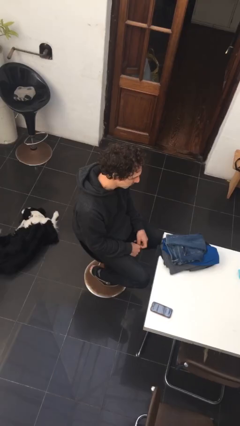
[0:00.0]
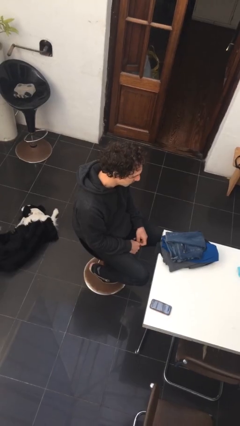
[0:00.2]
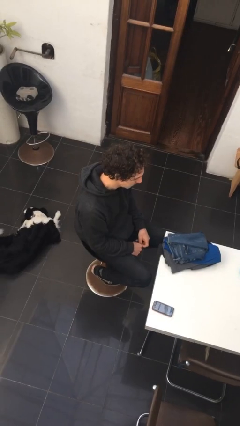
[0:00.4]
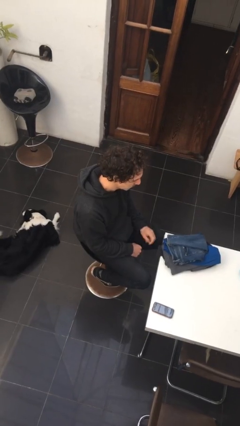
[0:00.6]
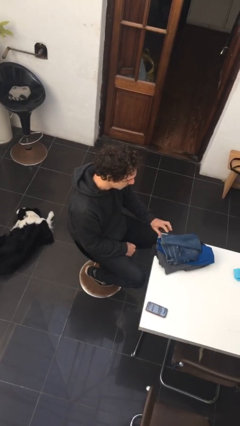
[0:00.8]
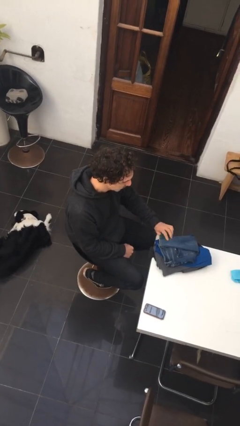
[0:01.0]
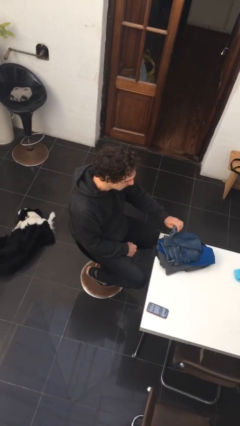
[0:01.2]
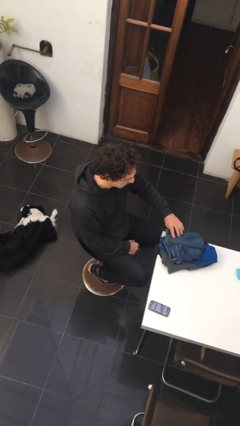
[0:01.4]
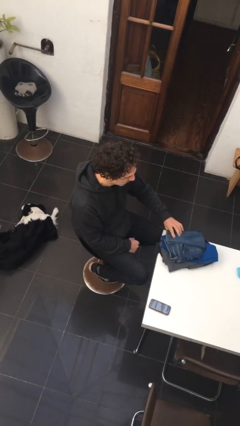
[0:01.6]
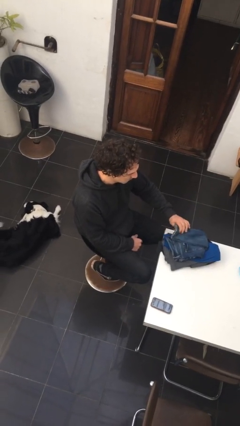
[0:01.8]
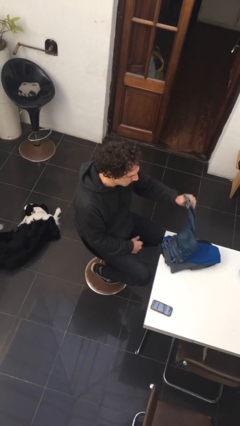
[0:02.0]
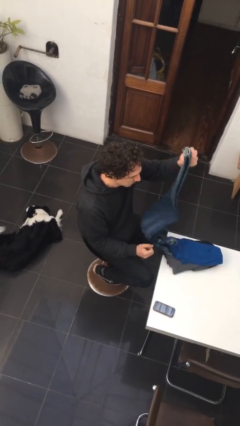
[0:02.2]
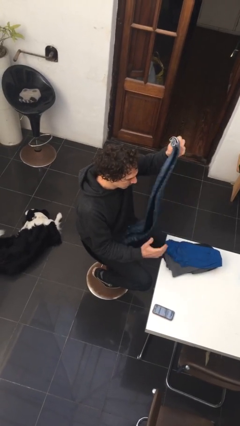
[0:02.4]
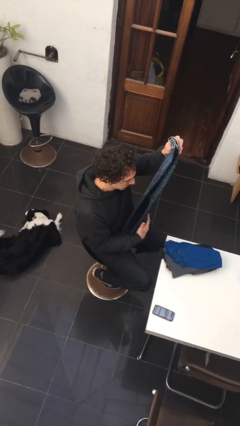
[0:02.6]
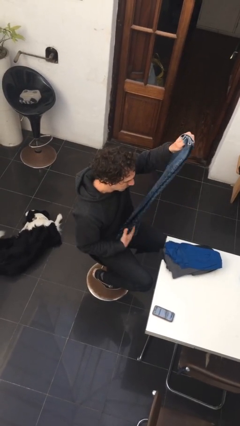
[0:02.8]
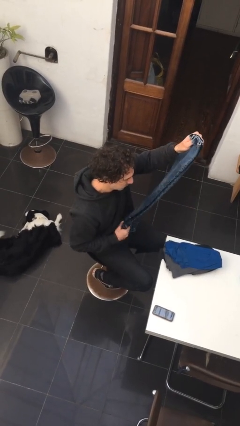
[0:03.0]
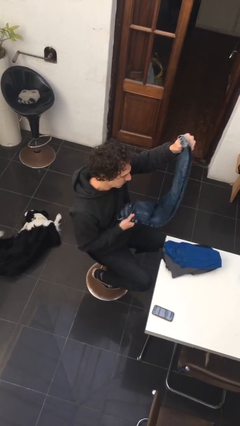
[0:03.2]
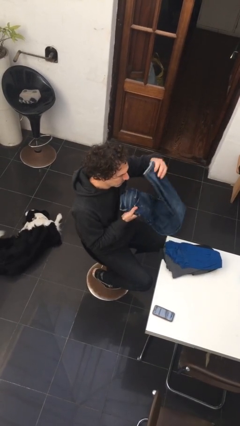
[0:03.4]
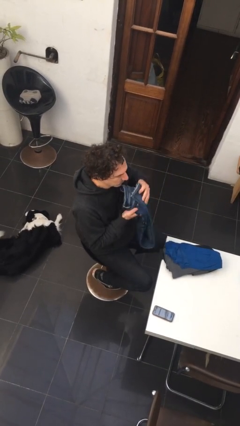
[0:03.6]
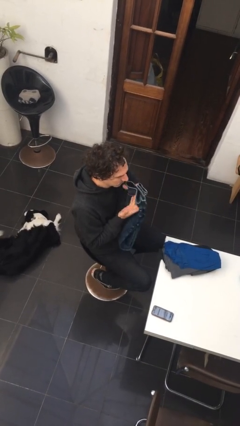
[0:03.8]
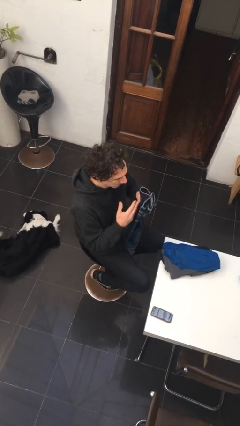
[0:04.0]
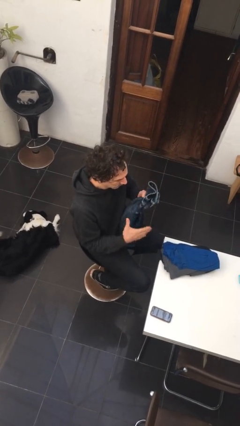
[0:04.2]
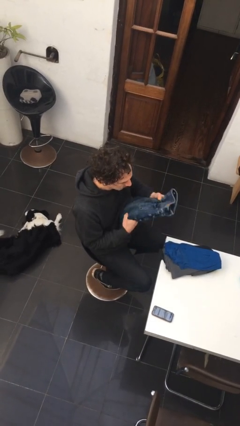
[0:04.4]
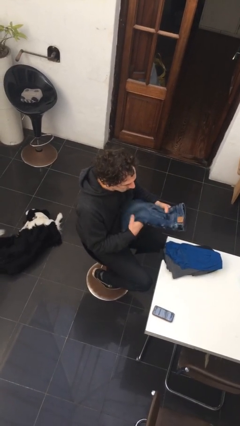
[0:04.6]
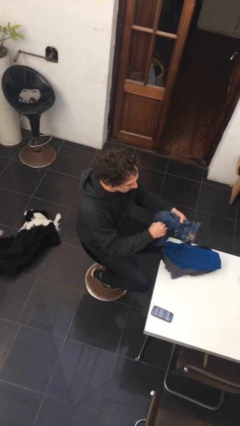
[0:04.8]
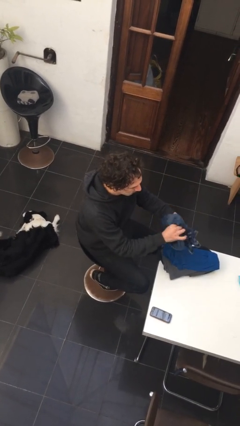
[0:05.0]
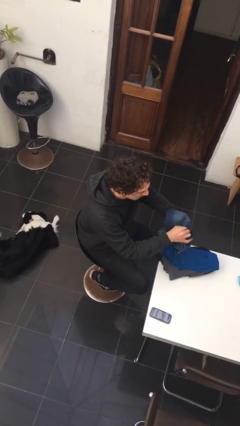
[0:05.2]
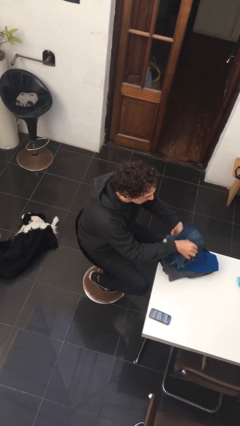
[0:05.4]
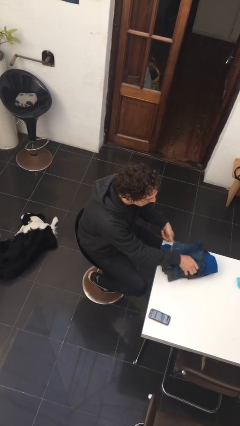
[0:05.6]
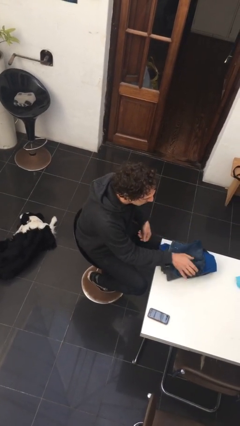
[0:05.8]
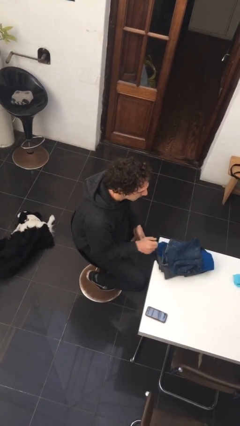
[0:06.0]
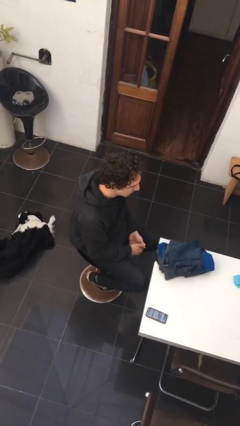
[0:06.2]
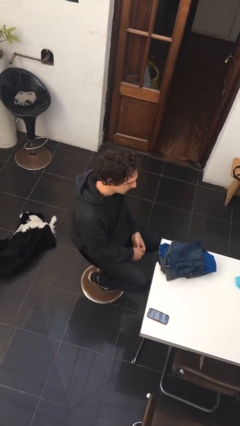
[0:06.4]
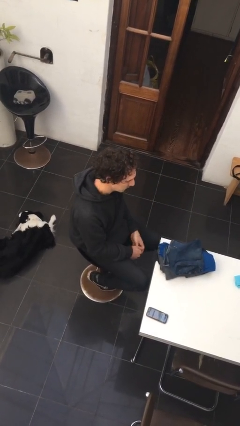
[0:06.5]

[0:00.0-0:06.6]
person folds pants

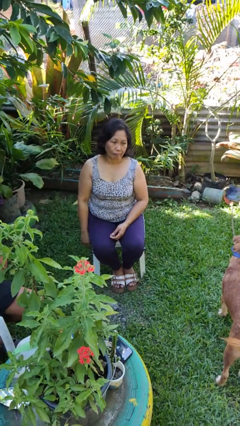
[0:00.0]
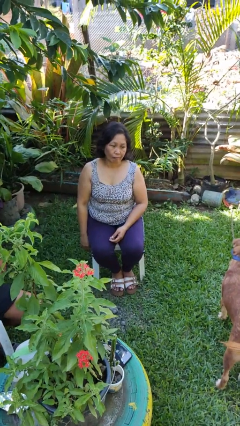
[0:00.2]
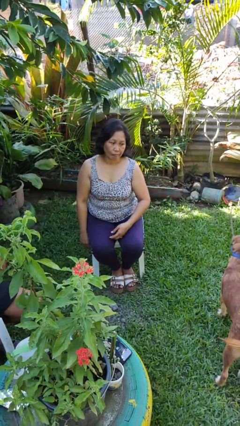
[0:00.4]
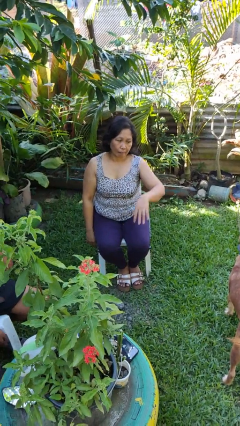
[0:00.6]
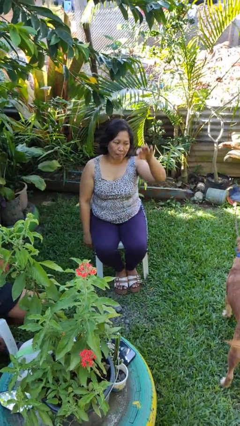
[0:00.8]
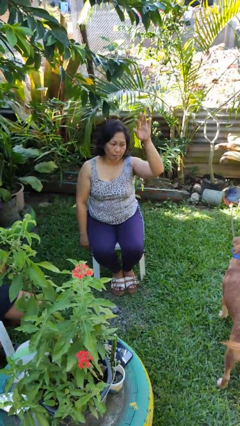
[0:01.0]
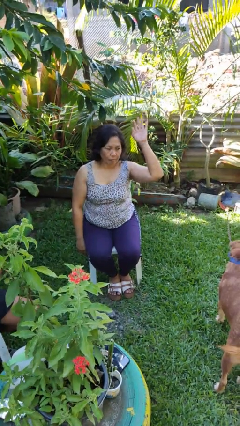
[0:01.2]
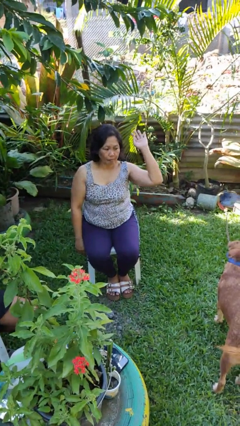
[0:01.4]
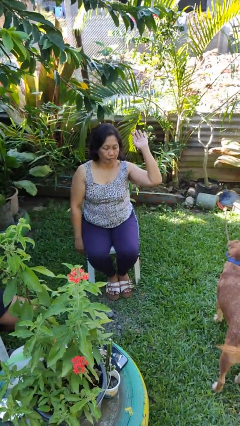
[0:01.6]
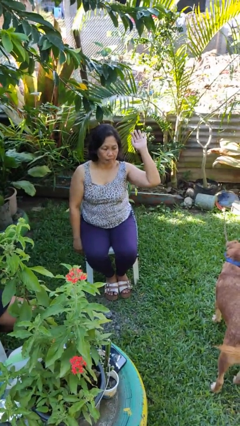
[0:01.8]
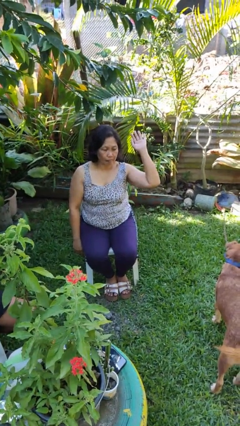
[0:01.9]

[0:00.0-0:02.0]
person gestures raise hand

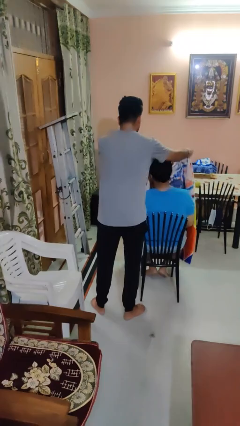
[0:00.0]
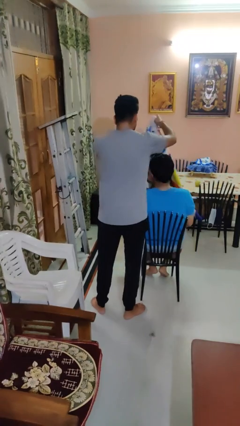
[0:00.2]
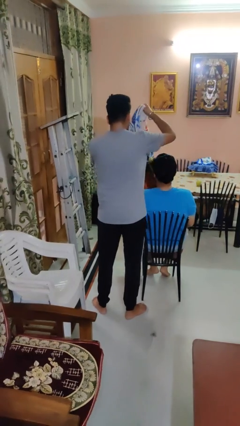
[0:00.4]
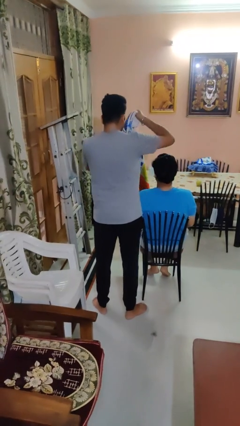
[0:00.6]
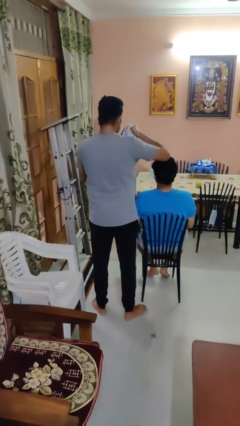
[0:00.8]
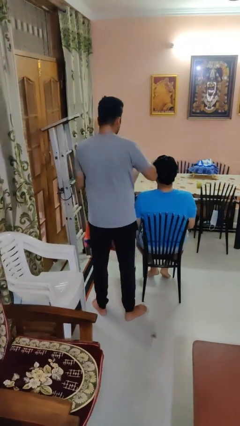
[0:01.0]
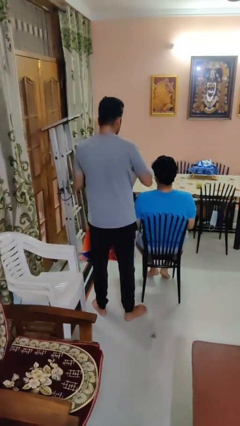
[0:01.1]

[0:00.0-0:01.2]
person uncovers friend with blanket

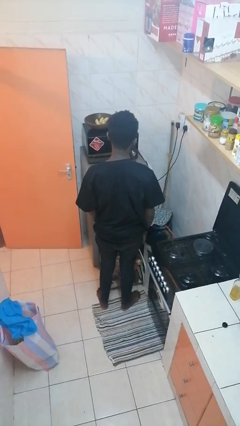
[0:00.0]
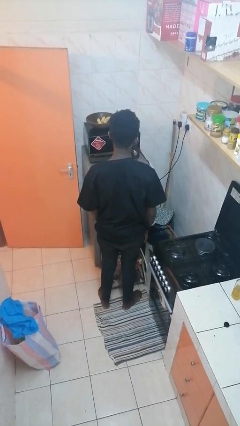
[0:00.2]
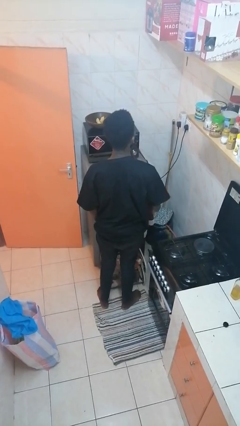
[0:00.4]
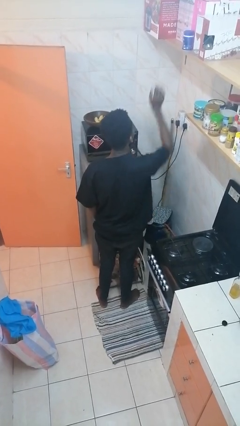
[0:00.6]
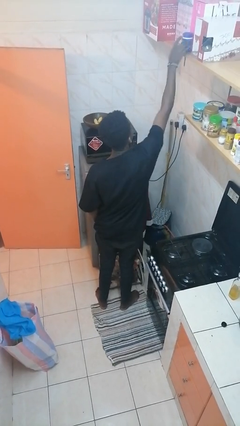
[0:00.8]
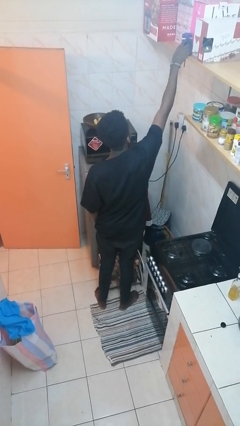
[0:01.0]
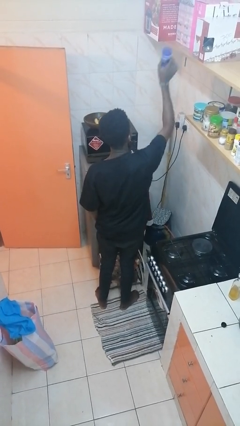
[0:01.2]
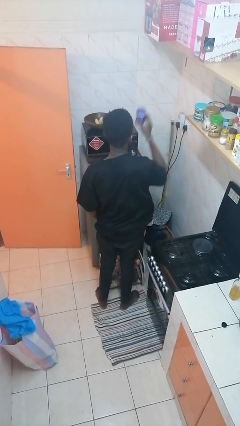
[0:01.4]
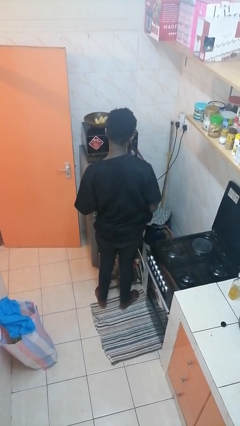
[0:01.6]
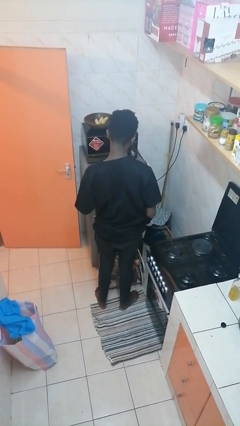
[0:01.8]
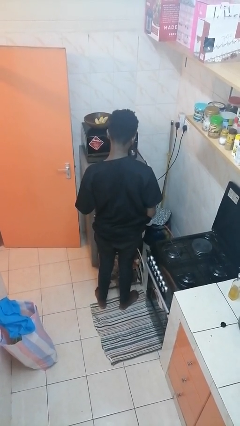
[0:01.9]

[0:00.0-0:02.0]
person picks up object from shelf

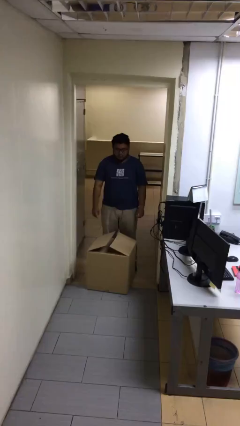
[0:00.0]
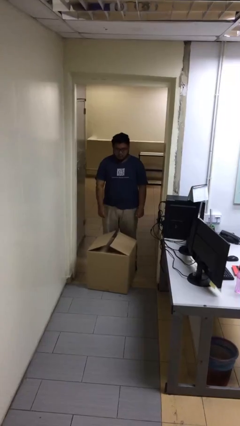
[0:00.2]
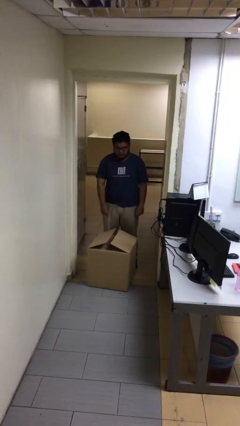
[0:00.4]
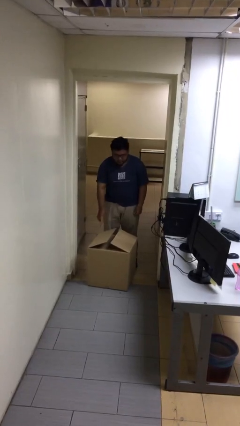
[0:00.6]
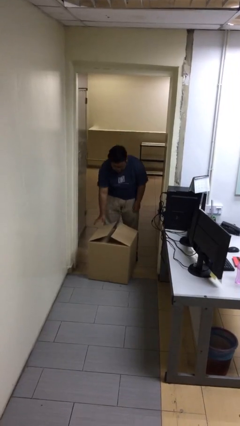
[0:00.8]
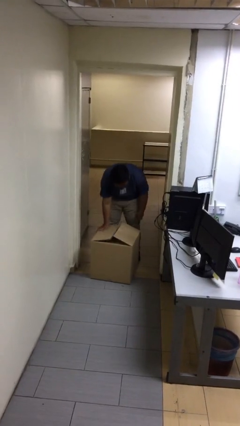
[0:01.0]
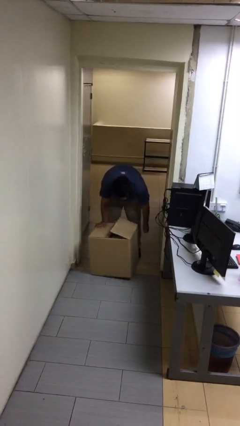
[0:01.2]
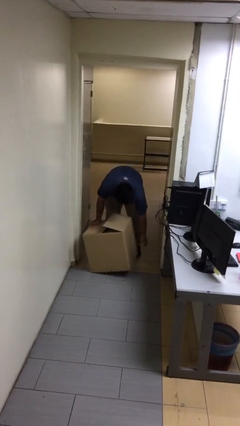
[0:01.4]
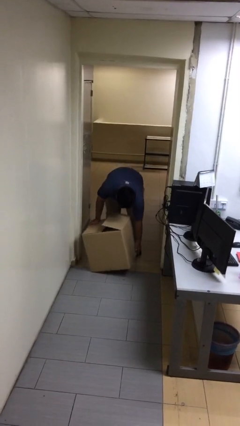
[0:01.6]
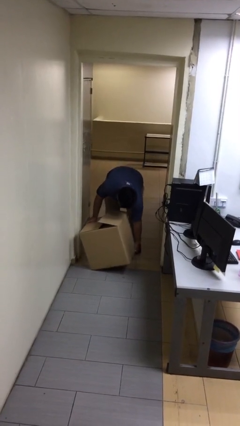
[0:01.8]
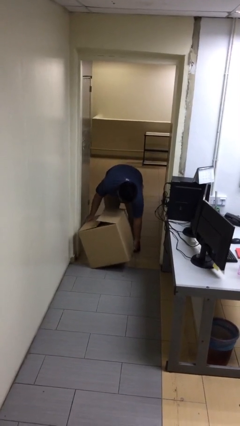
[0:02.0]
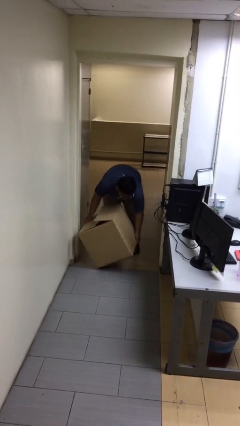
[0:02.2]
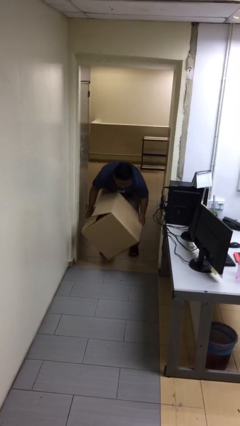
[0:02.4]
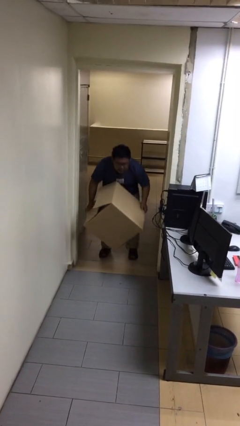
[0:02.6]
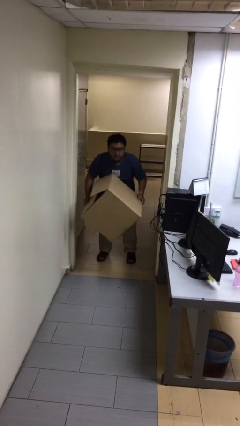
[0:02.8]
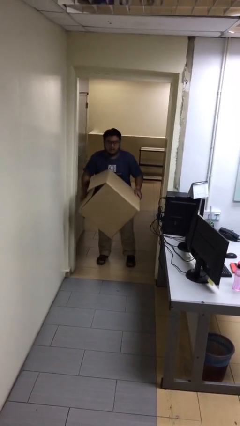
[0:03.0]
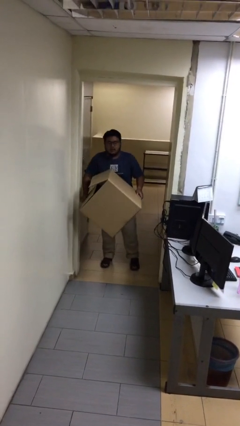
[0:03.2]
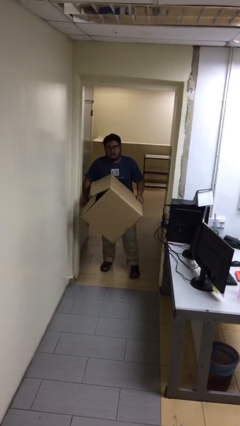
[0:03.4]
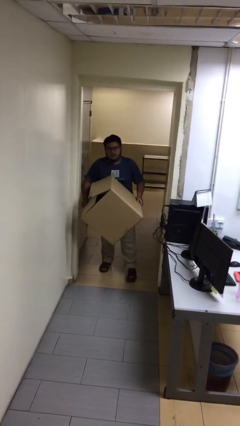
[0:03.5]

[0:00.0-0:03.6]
person picks up object from floor

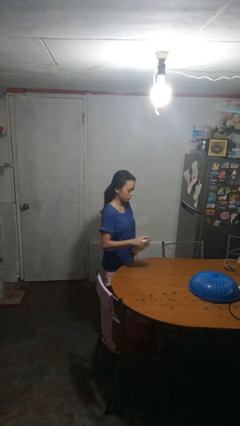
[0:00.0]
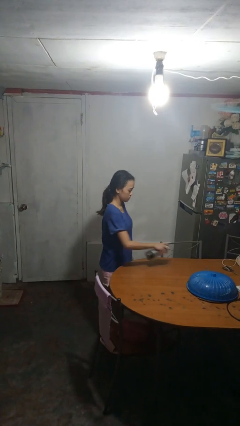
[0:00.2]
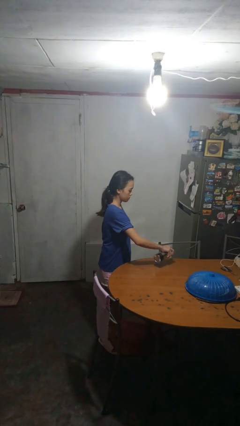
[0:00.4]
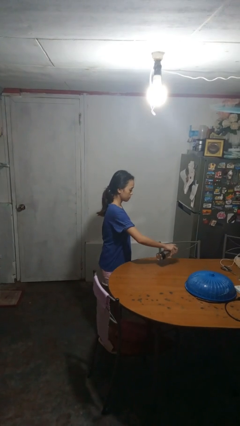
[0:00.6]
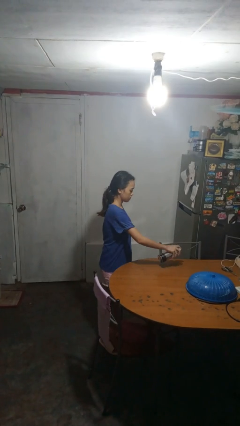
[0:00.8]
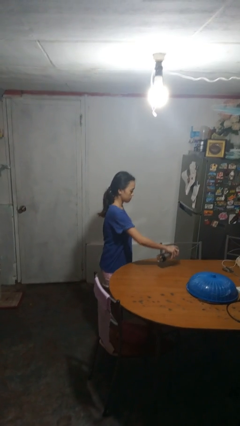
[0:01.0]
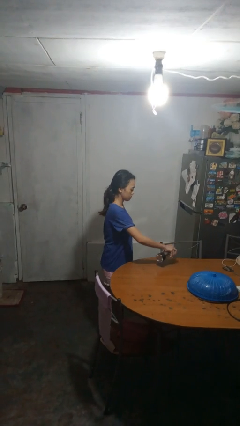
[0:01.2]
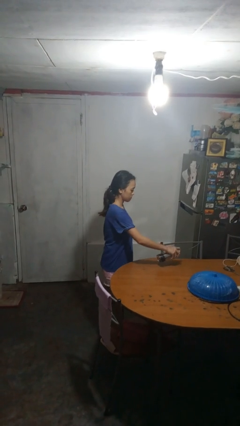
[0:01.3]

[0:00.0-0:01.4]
person sprays from bottle

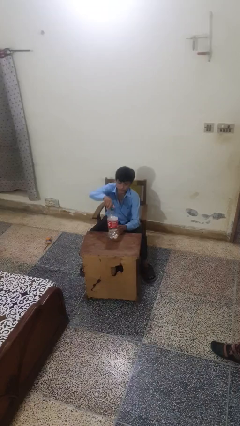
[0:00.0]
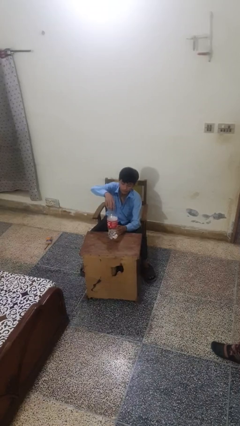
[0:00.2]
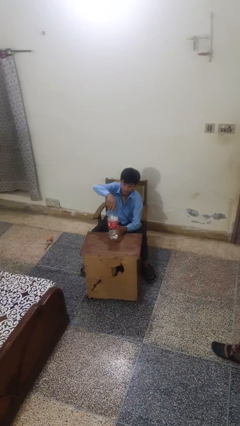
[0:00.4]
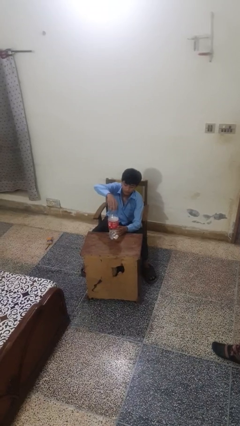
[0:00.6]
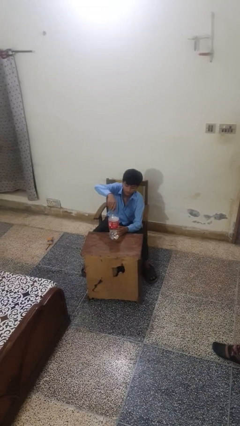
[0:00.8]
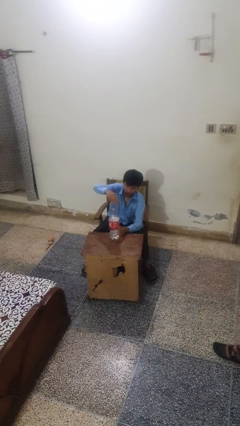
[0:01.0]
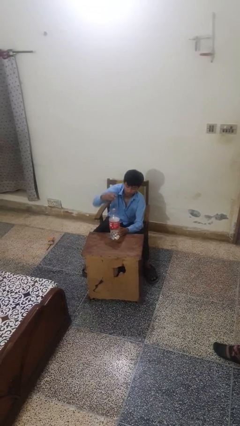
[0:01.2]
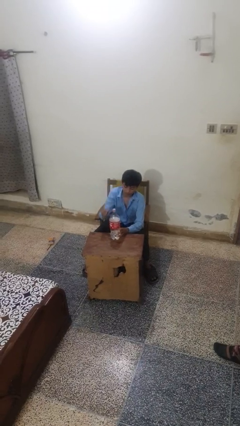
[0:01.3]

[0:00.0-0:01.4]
person unscrews lid from bottle
